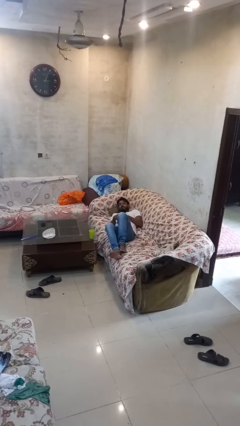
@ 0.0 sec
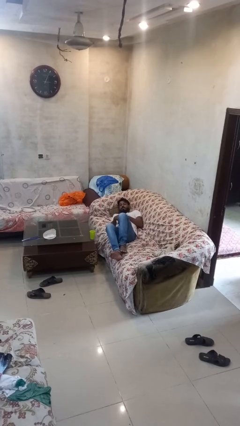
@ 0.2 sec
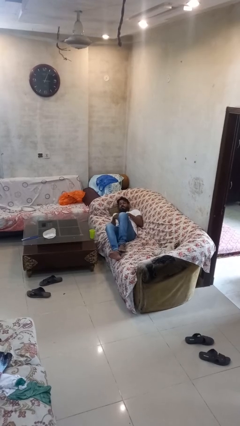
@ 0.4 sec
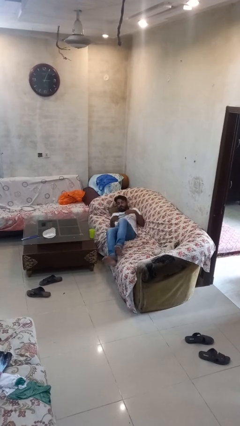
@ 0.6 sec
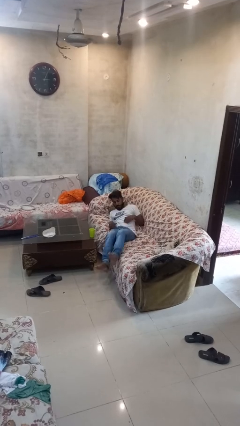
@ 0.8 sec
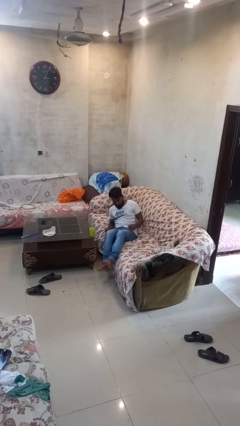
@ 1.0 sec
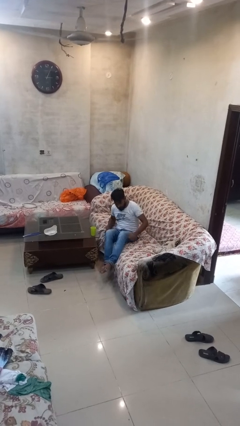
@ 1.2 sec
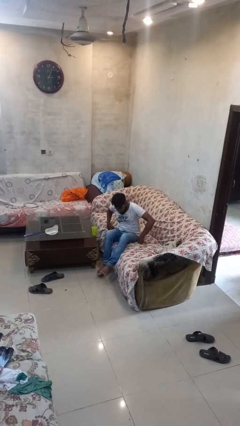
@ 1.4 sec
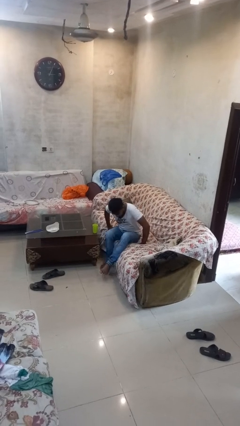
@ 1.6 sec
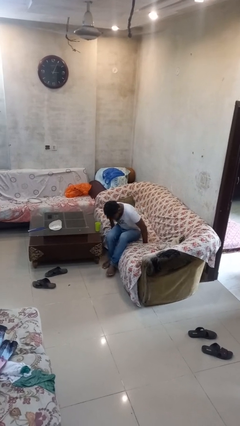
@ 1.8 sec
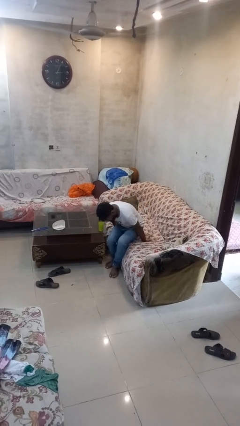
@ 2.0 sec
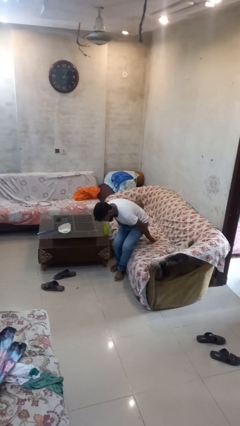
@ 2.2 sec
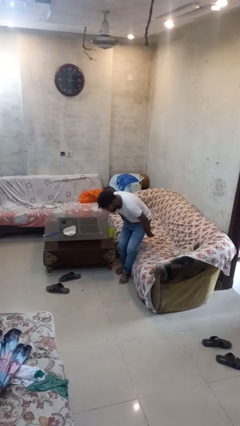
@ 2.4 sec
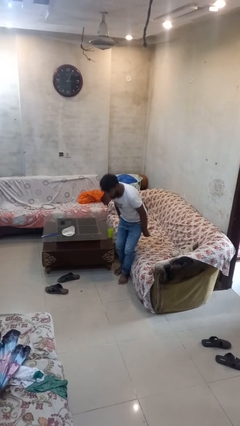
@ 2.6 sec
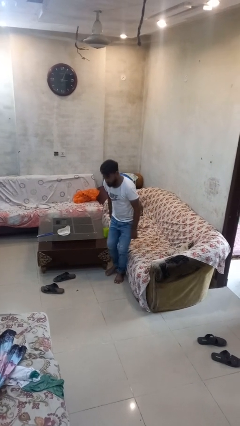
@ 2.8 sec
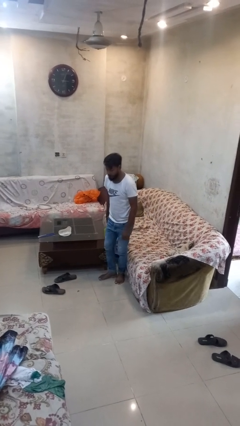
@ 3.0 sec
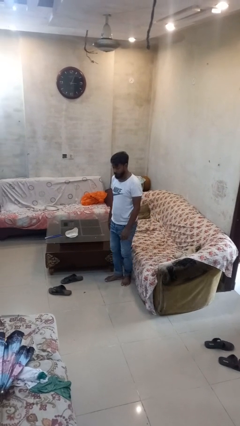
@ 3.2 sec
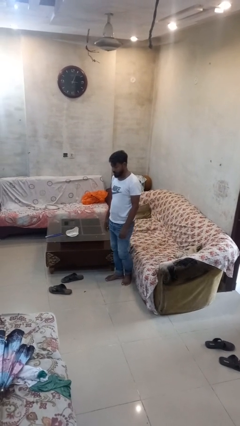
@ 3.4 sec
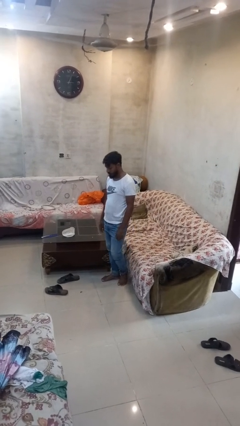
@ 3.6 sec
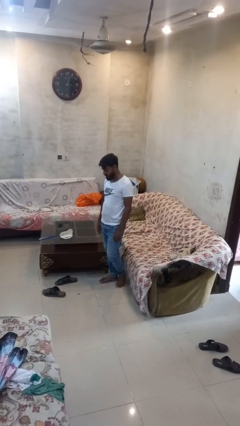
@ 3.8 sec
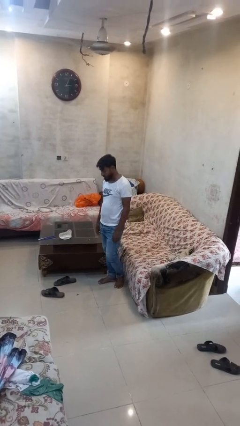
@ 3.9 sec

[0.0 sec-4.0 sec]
person stands up

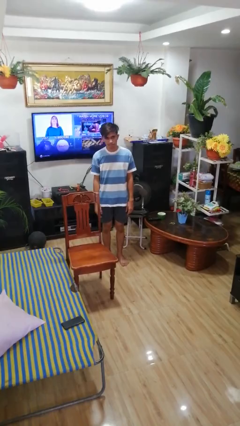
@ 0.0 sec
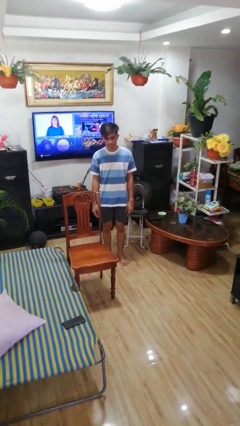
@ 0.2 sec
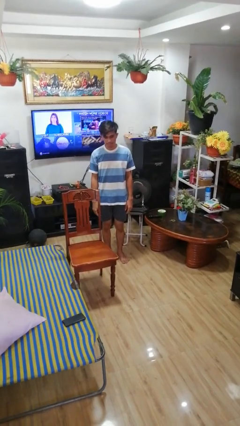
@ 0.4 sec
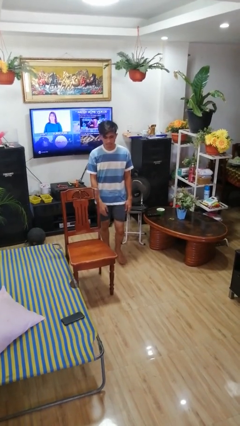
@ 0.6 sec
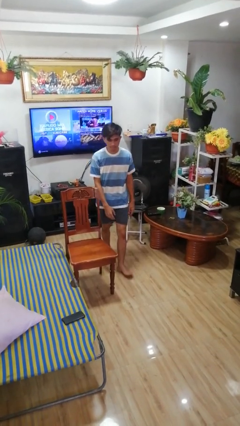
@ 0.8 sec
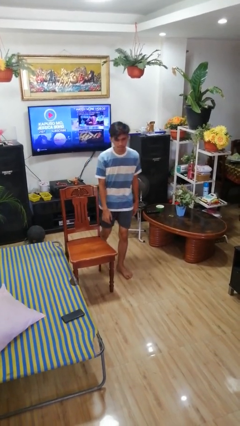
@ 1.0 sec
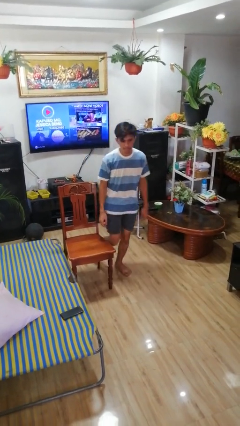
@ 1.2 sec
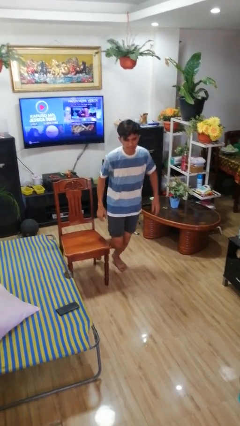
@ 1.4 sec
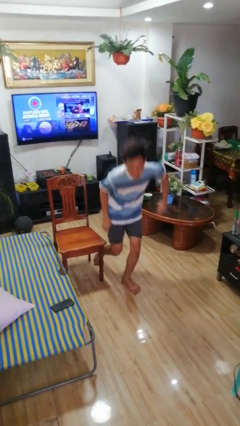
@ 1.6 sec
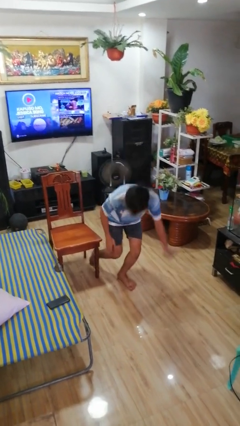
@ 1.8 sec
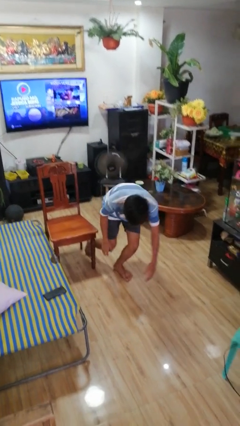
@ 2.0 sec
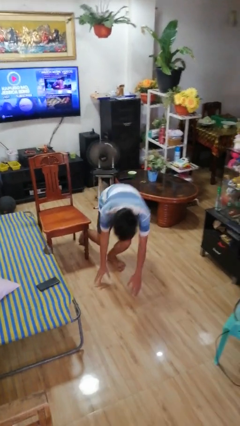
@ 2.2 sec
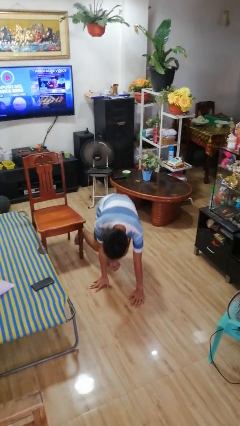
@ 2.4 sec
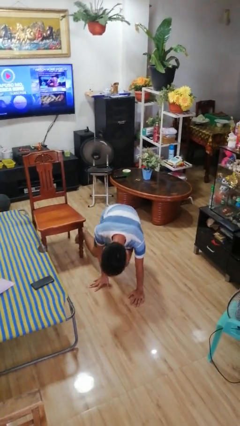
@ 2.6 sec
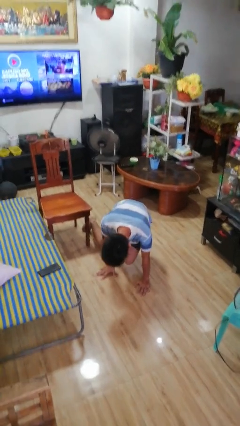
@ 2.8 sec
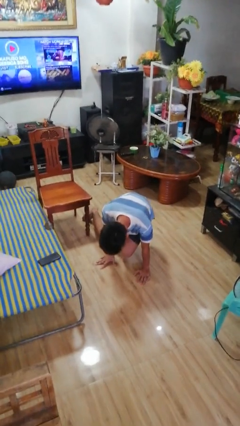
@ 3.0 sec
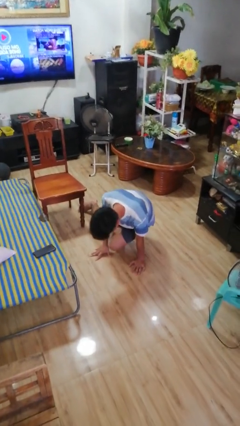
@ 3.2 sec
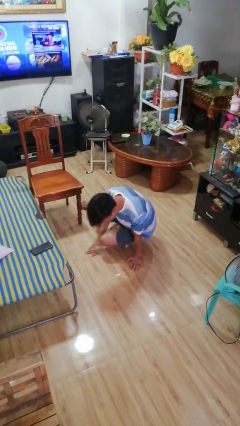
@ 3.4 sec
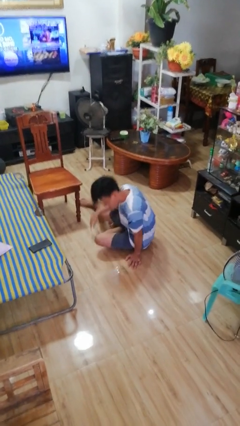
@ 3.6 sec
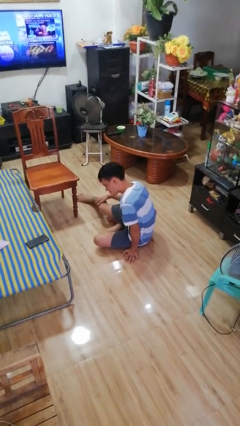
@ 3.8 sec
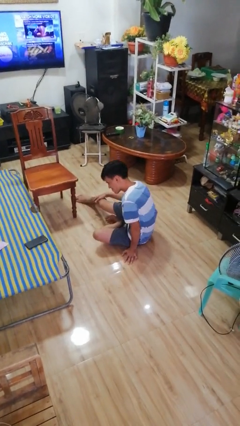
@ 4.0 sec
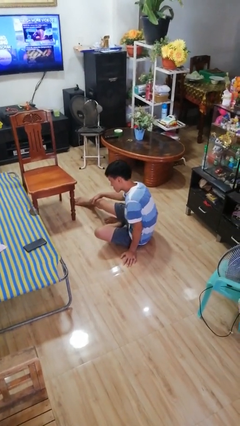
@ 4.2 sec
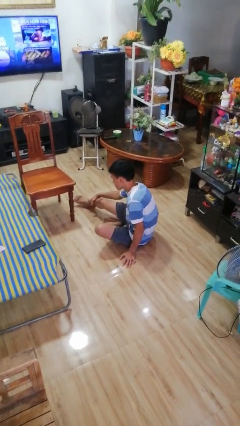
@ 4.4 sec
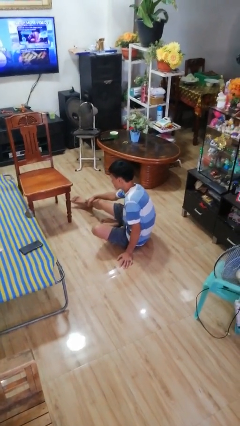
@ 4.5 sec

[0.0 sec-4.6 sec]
person trips on object on floor

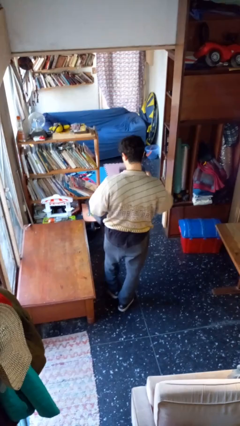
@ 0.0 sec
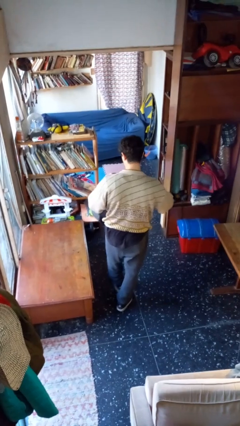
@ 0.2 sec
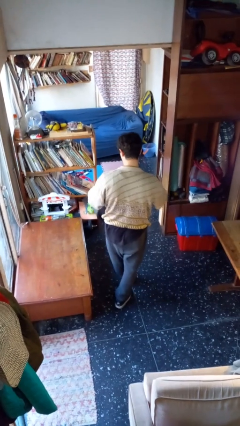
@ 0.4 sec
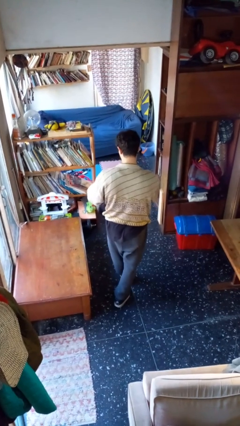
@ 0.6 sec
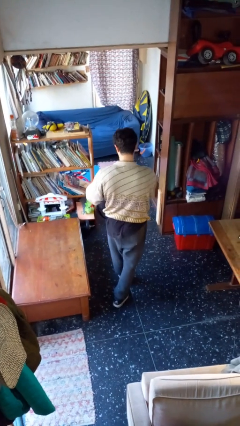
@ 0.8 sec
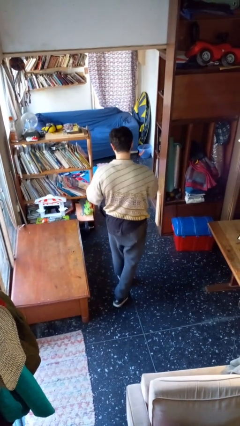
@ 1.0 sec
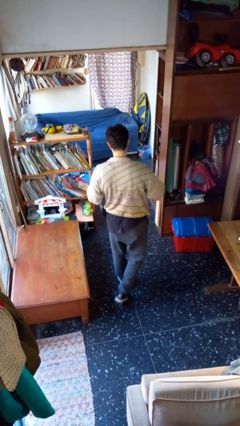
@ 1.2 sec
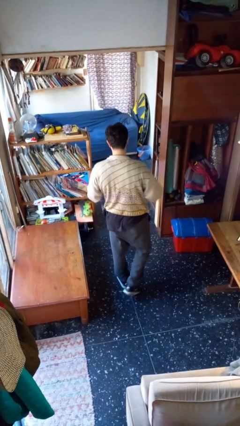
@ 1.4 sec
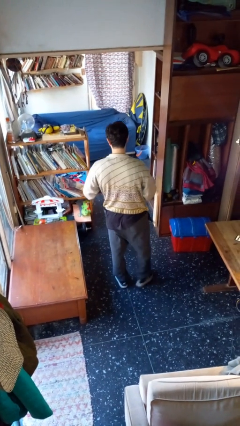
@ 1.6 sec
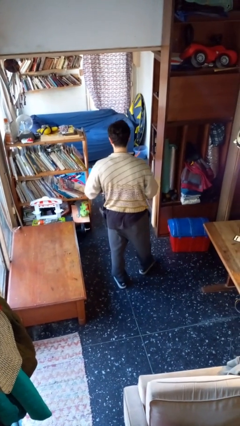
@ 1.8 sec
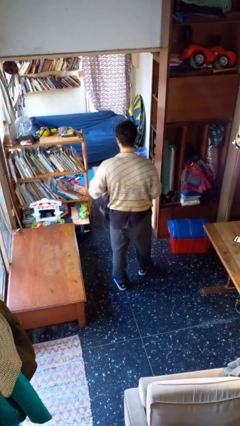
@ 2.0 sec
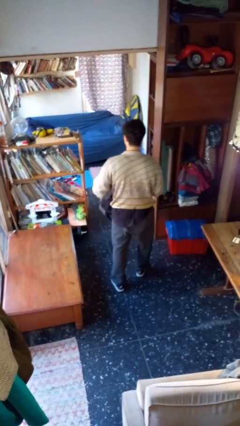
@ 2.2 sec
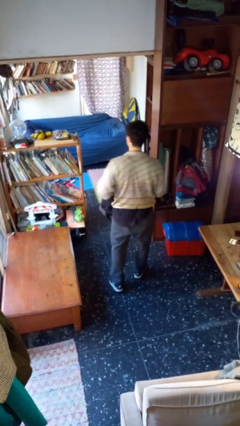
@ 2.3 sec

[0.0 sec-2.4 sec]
person puts object into backpack

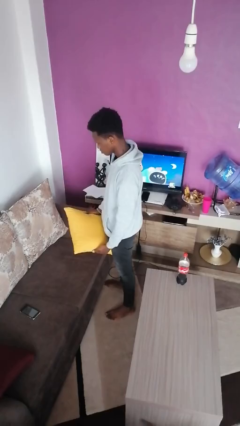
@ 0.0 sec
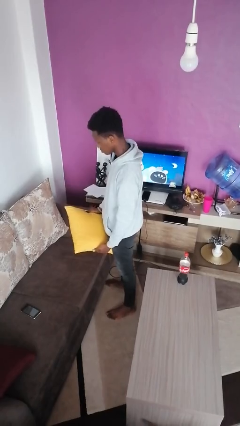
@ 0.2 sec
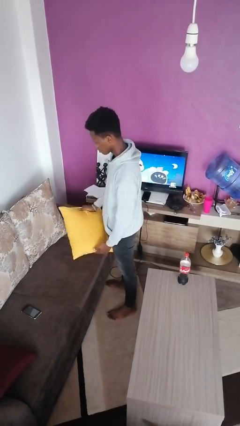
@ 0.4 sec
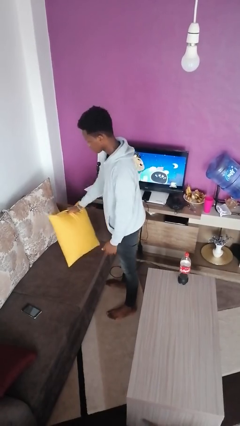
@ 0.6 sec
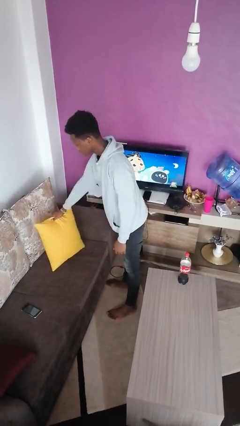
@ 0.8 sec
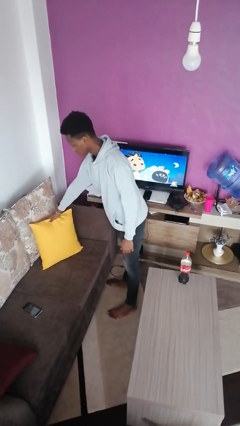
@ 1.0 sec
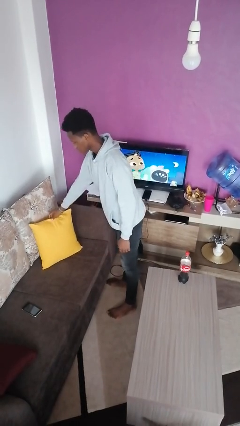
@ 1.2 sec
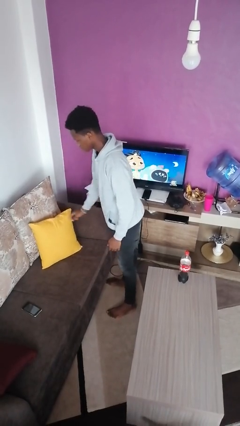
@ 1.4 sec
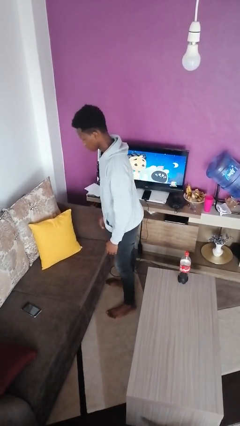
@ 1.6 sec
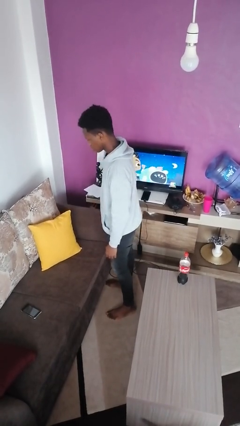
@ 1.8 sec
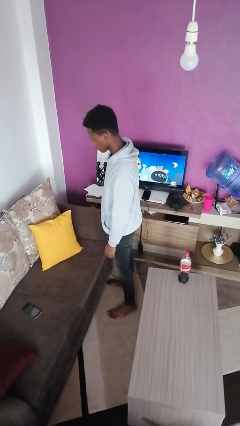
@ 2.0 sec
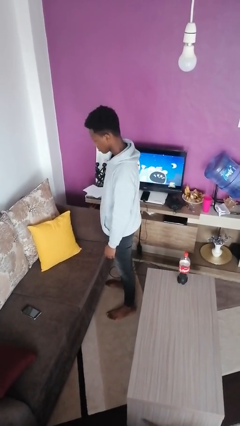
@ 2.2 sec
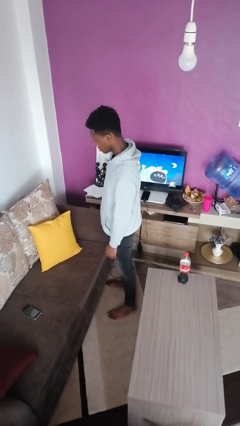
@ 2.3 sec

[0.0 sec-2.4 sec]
person puts down object on couch

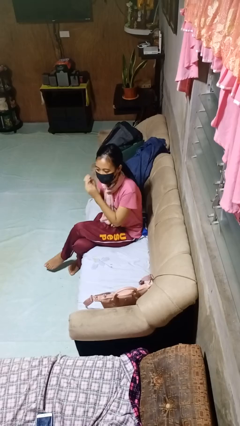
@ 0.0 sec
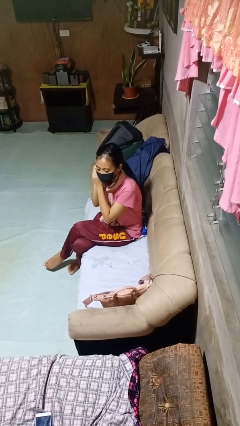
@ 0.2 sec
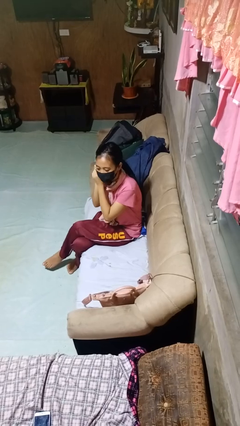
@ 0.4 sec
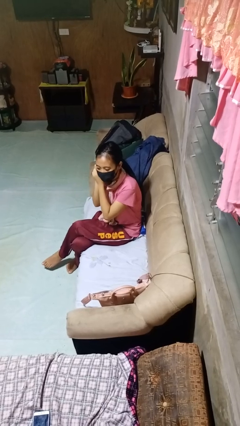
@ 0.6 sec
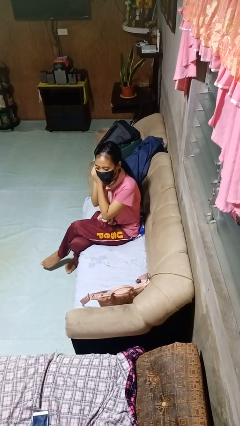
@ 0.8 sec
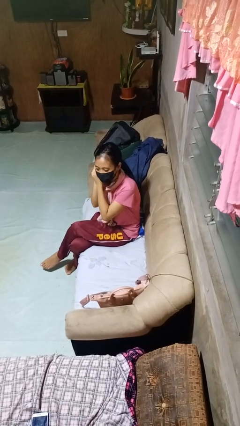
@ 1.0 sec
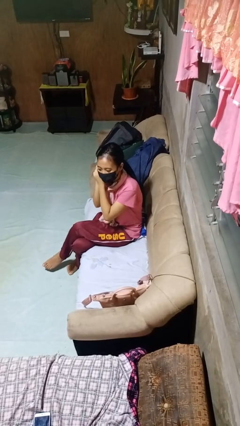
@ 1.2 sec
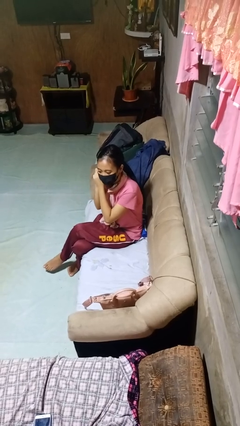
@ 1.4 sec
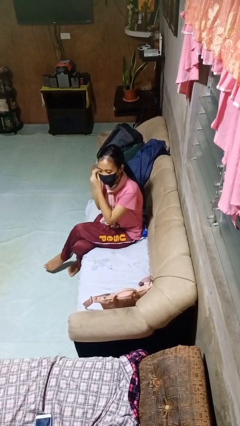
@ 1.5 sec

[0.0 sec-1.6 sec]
person puts on earrings

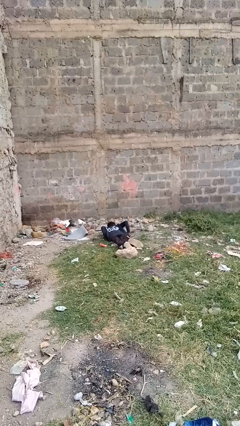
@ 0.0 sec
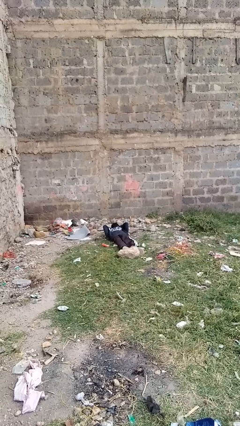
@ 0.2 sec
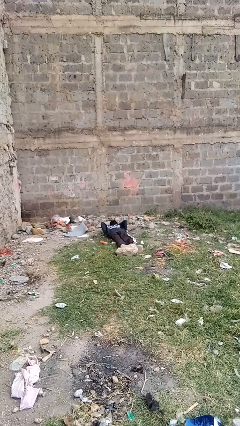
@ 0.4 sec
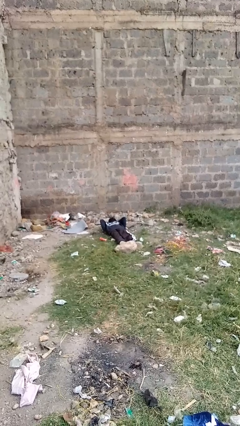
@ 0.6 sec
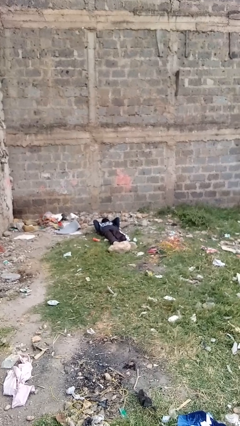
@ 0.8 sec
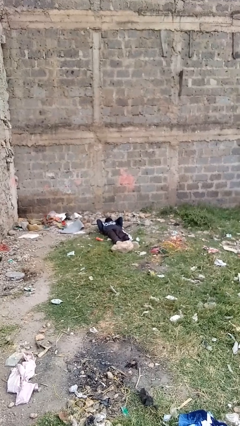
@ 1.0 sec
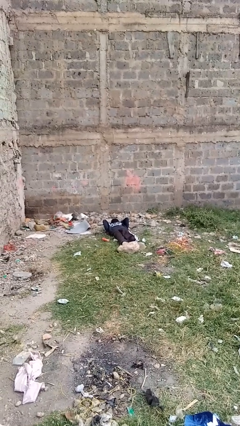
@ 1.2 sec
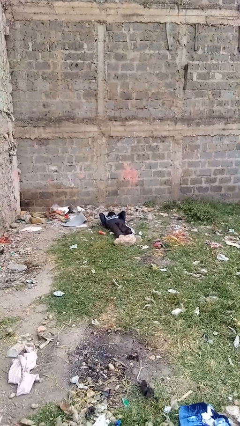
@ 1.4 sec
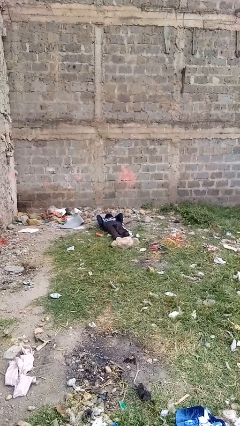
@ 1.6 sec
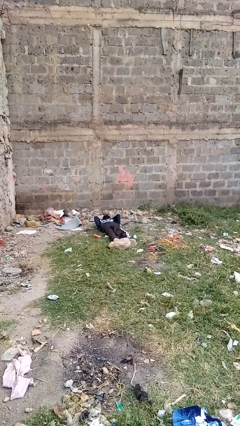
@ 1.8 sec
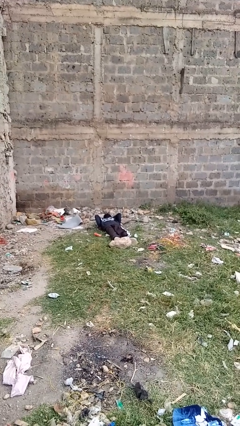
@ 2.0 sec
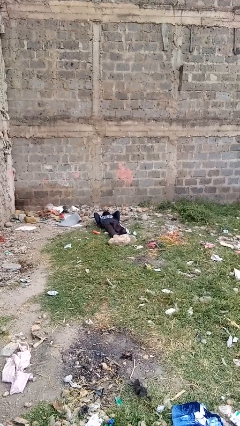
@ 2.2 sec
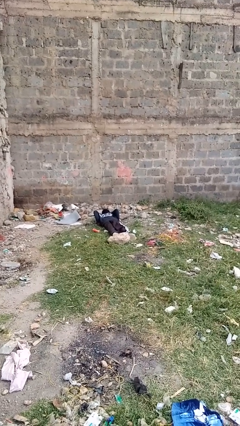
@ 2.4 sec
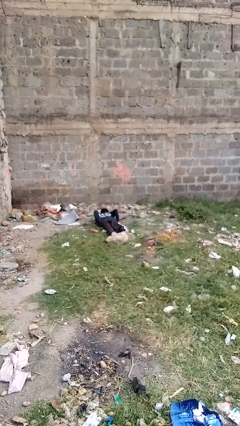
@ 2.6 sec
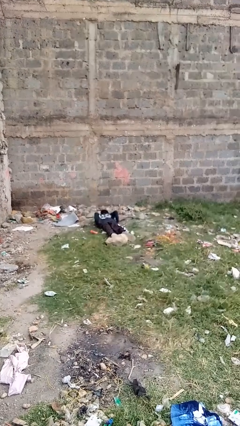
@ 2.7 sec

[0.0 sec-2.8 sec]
person lies down on floor
